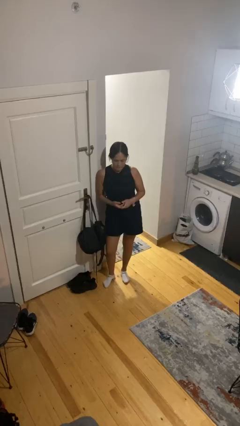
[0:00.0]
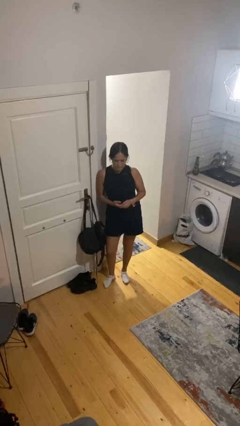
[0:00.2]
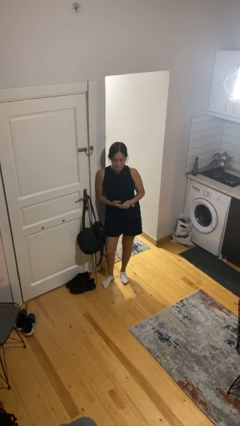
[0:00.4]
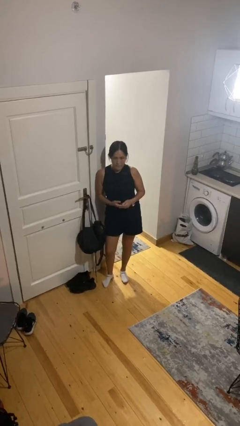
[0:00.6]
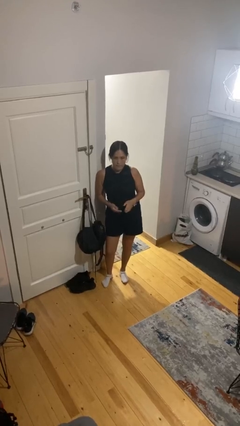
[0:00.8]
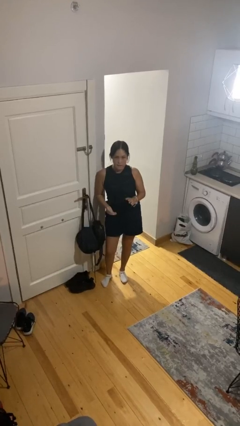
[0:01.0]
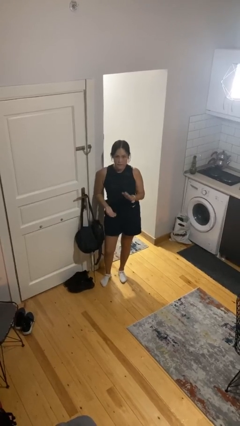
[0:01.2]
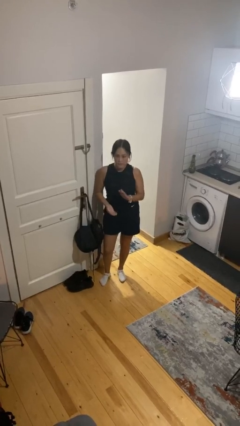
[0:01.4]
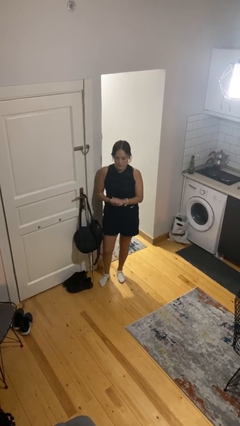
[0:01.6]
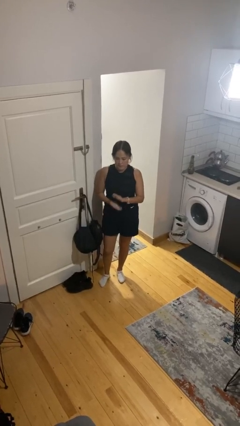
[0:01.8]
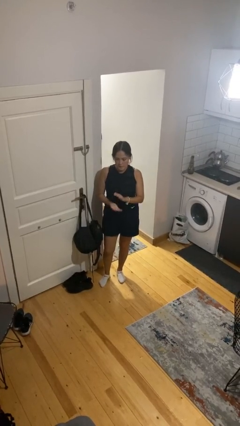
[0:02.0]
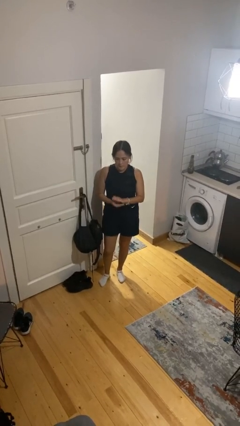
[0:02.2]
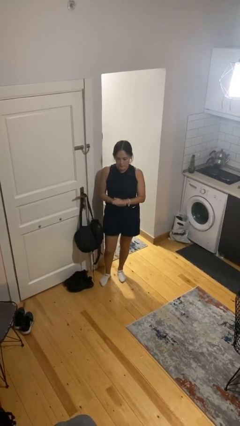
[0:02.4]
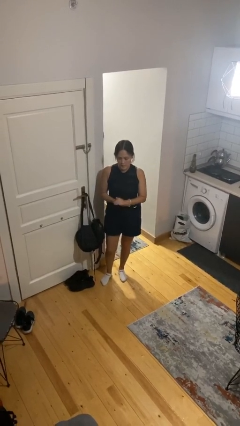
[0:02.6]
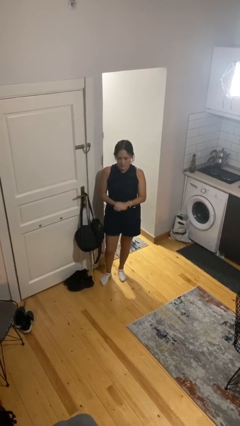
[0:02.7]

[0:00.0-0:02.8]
person claps hands

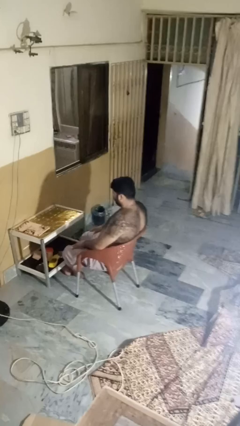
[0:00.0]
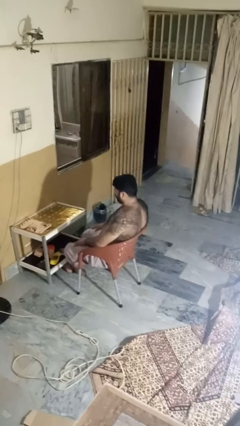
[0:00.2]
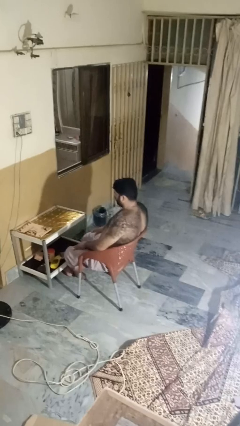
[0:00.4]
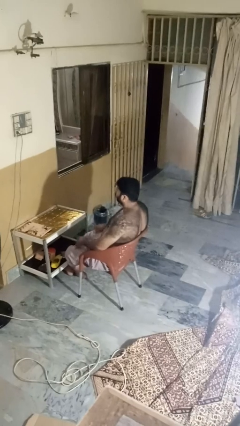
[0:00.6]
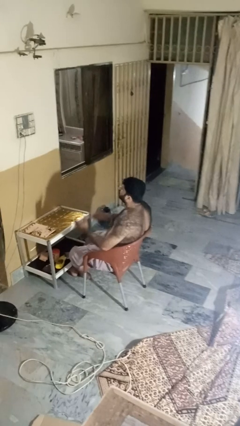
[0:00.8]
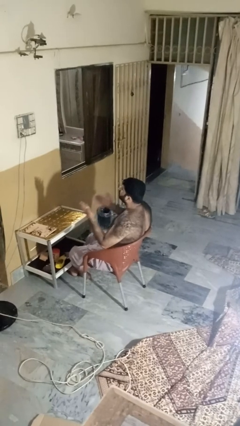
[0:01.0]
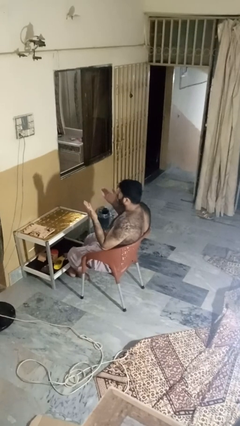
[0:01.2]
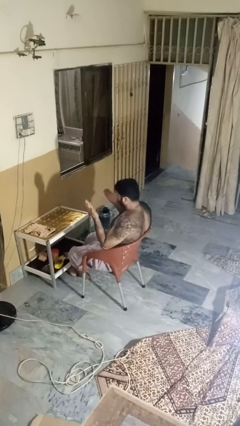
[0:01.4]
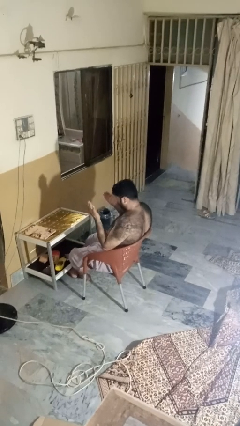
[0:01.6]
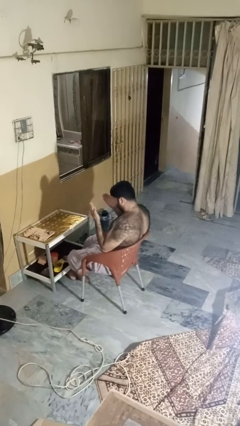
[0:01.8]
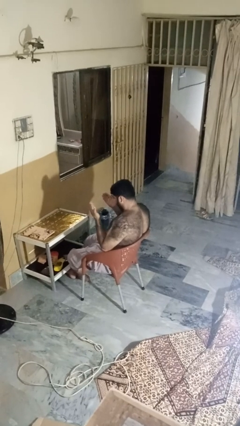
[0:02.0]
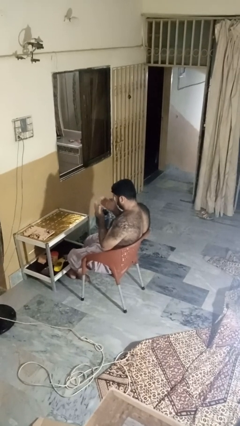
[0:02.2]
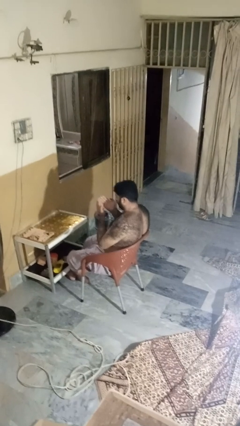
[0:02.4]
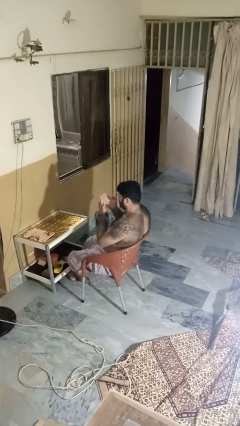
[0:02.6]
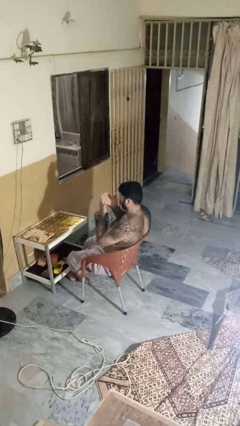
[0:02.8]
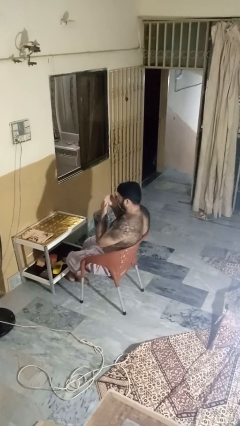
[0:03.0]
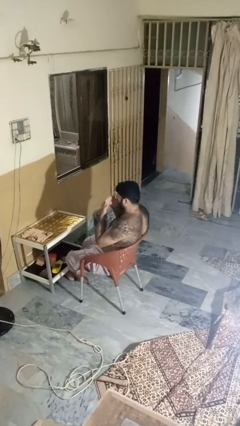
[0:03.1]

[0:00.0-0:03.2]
person prays

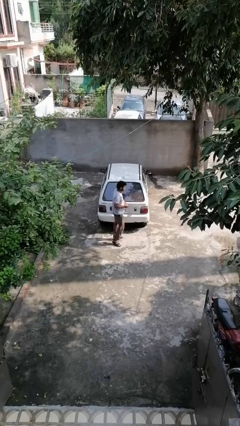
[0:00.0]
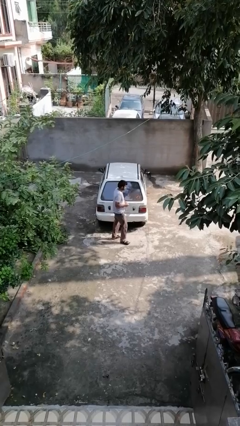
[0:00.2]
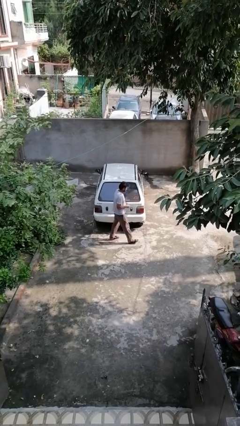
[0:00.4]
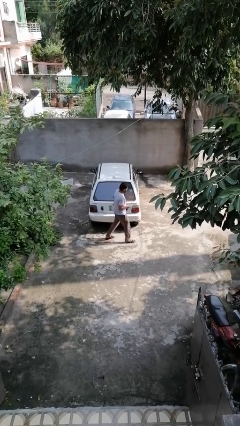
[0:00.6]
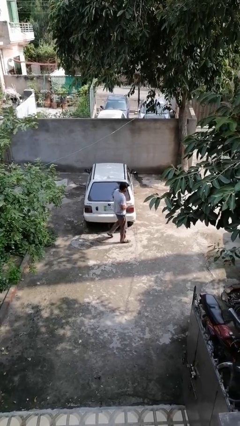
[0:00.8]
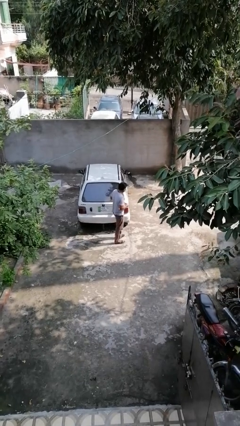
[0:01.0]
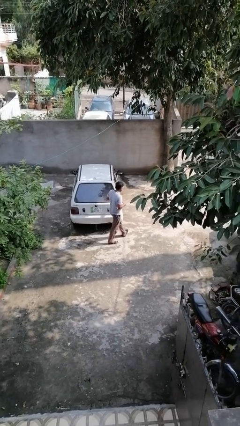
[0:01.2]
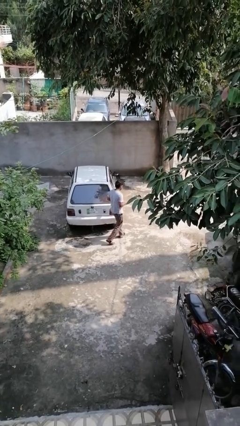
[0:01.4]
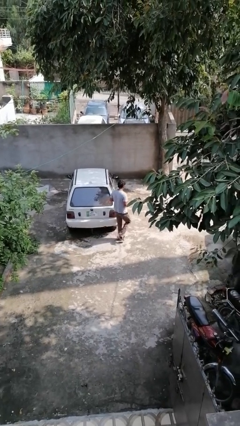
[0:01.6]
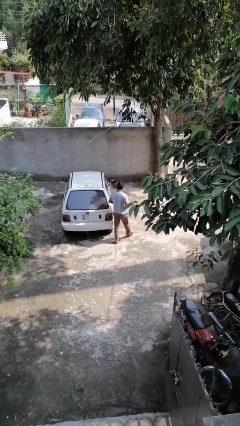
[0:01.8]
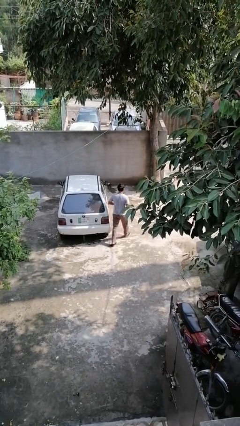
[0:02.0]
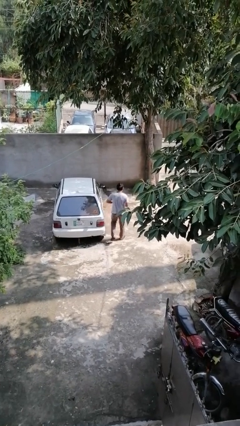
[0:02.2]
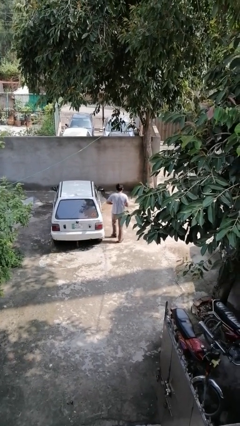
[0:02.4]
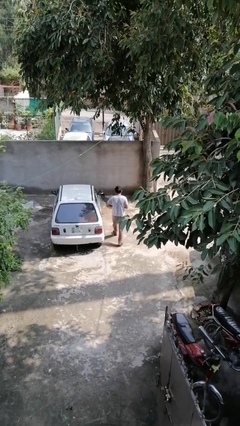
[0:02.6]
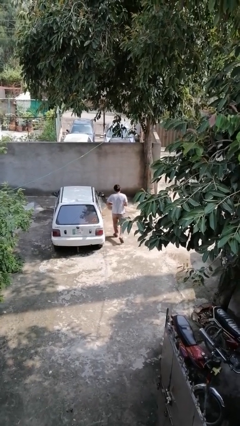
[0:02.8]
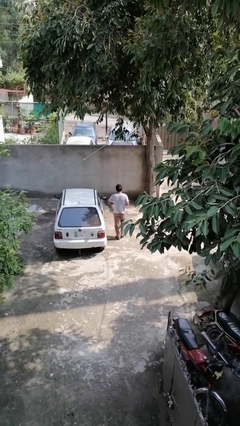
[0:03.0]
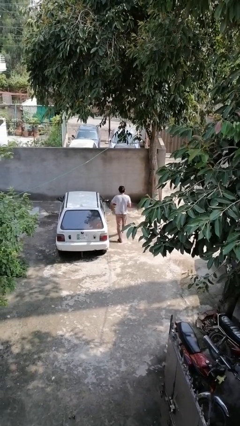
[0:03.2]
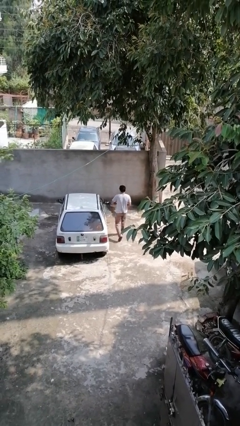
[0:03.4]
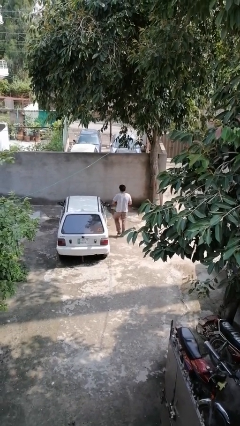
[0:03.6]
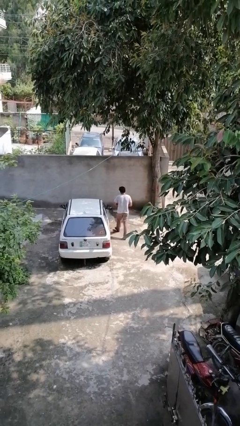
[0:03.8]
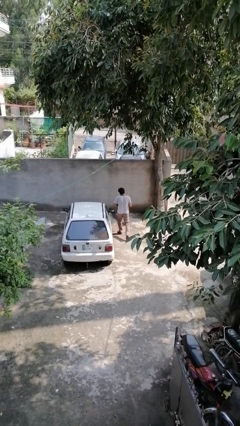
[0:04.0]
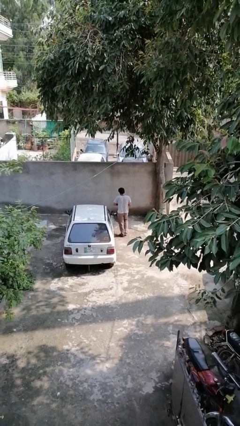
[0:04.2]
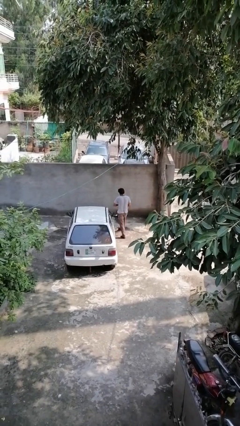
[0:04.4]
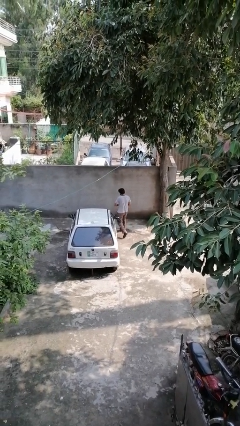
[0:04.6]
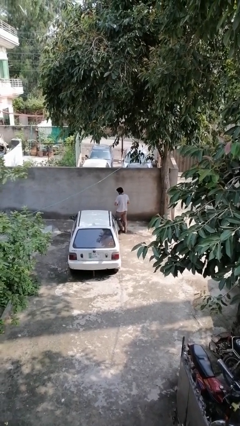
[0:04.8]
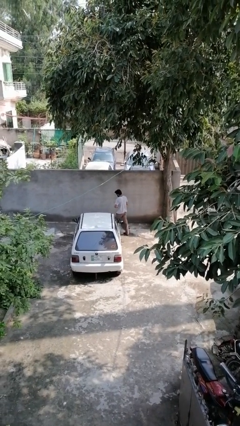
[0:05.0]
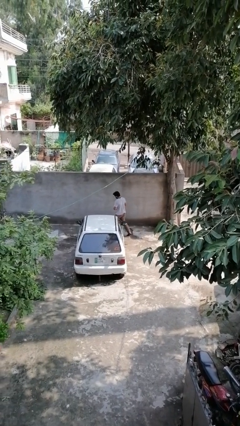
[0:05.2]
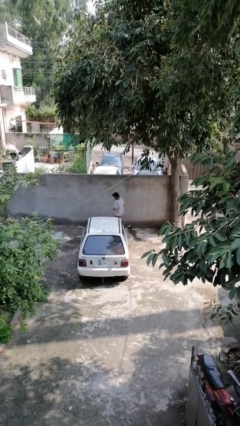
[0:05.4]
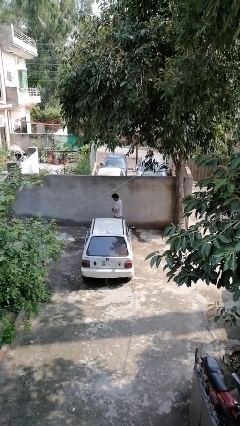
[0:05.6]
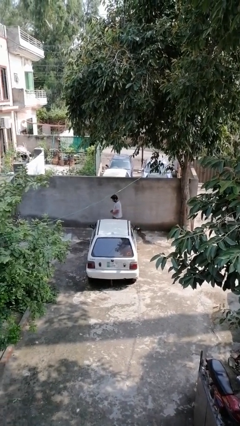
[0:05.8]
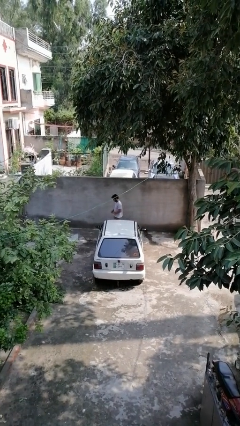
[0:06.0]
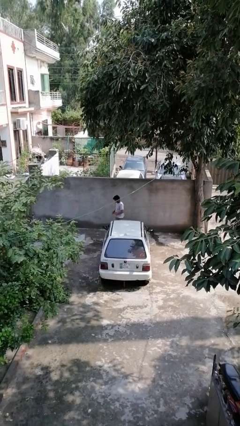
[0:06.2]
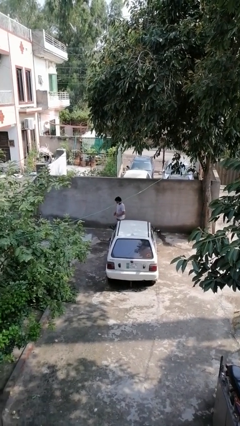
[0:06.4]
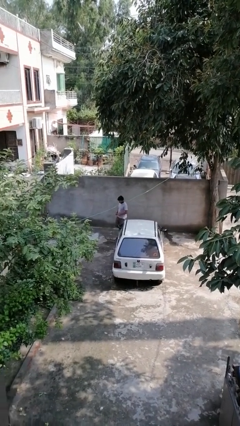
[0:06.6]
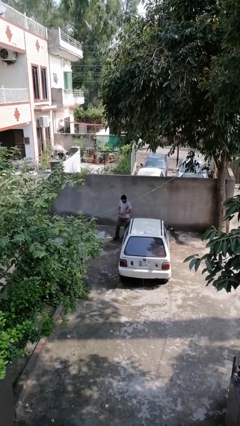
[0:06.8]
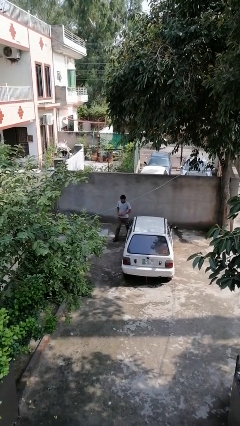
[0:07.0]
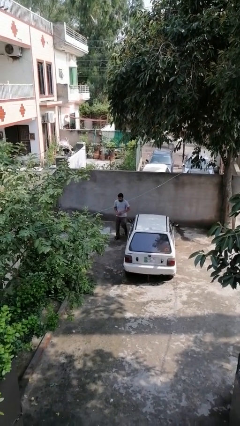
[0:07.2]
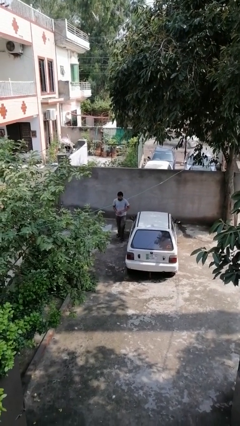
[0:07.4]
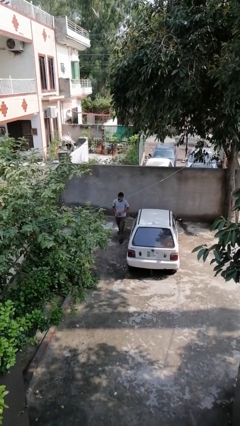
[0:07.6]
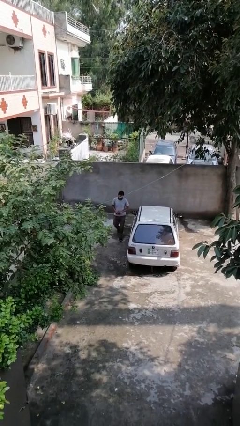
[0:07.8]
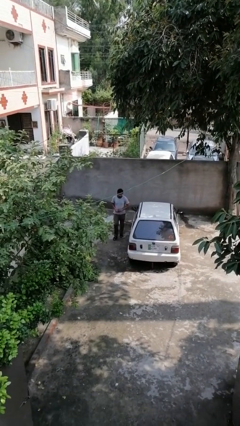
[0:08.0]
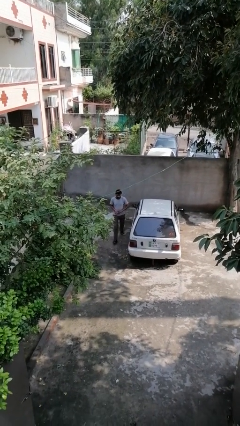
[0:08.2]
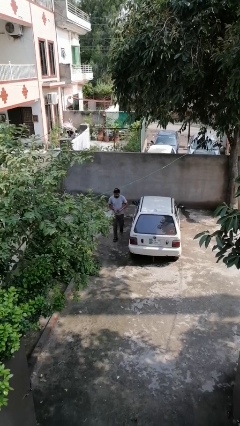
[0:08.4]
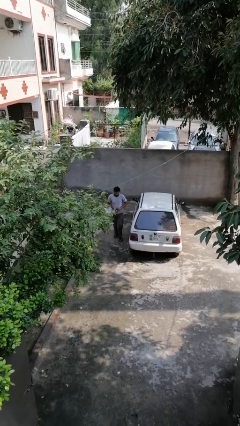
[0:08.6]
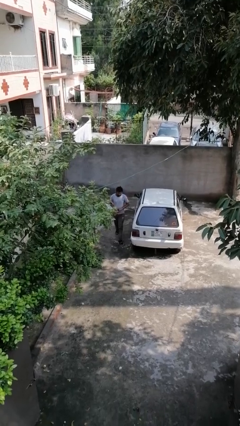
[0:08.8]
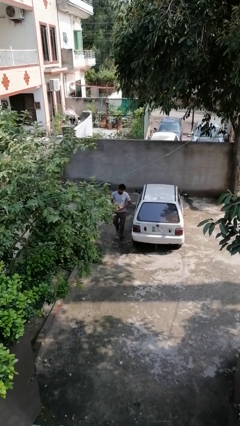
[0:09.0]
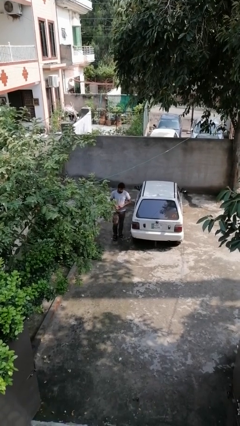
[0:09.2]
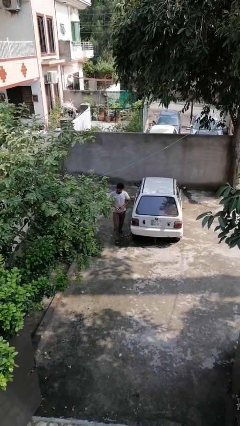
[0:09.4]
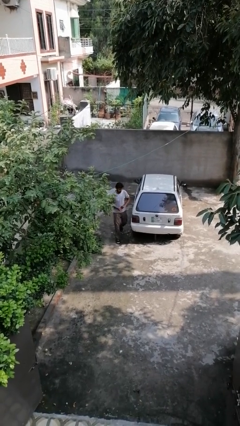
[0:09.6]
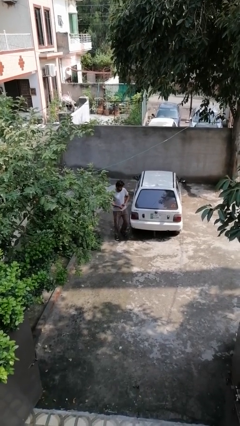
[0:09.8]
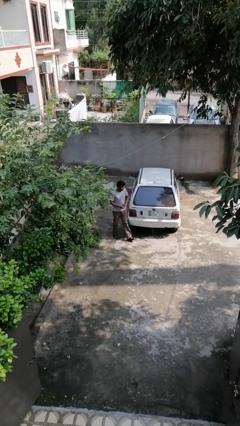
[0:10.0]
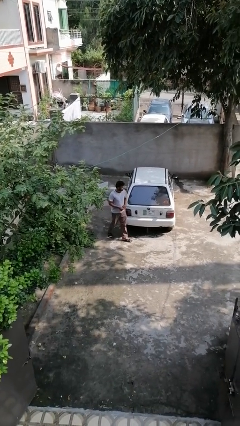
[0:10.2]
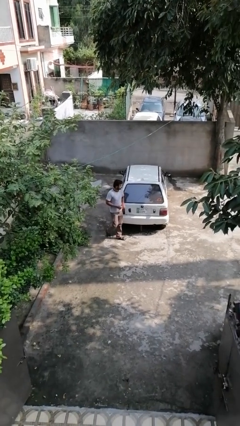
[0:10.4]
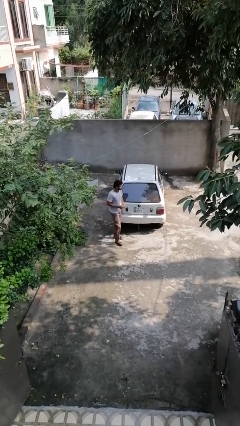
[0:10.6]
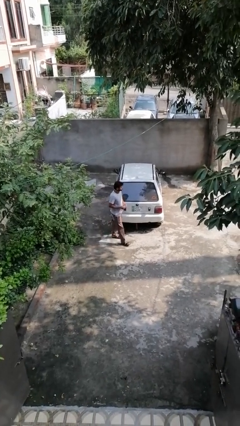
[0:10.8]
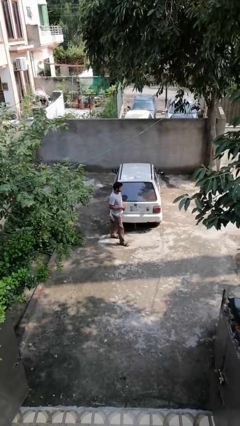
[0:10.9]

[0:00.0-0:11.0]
person walks around car

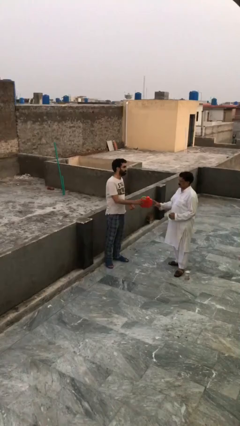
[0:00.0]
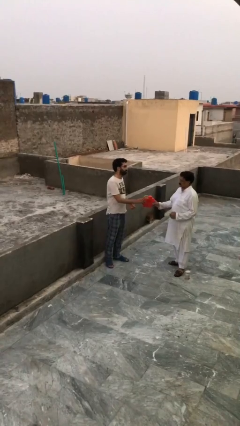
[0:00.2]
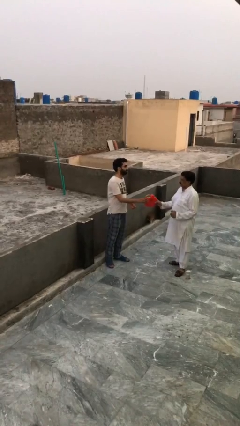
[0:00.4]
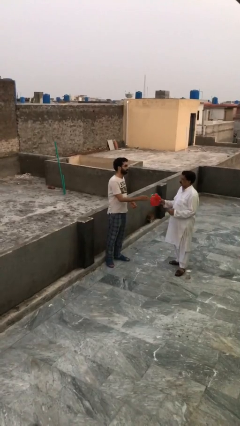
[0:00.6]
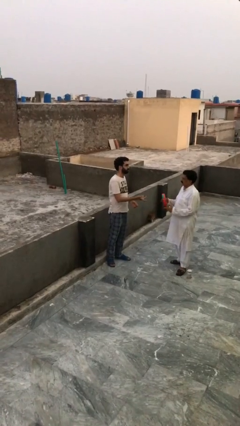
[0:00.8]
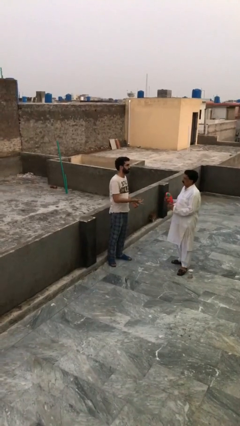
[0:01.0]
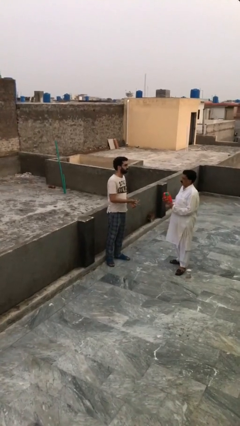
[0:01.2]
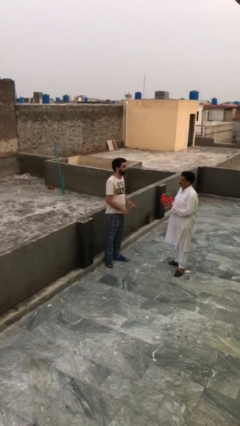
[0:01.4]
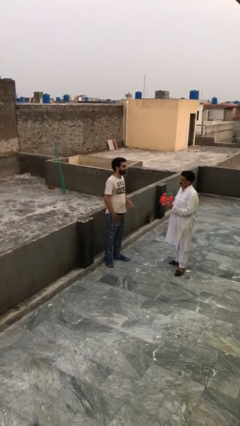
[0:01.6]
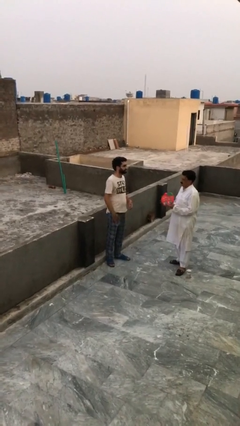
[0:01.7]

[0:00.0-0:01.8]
person transfers object to person
